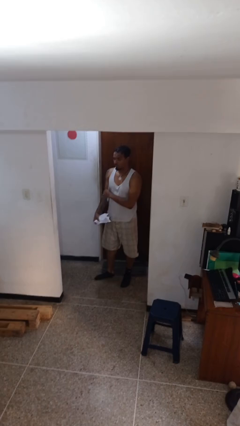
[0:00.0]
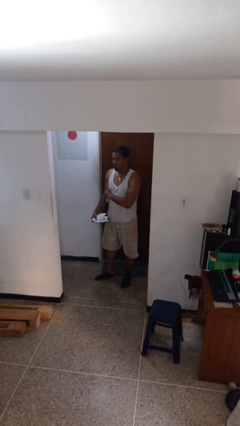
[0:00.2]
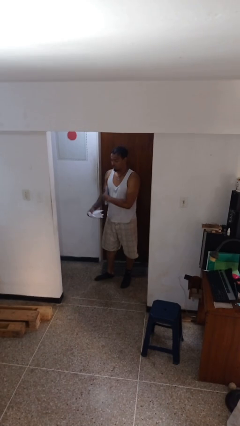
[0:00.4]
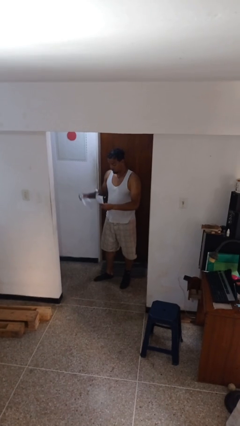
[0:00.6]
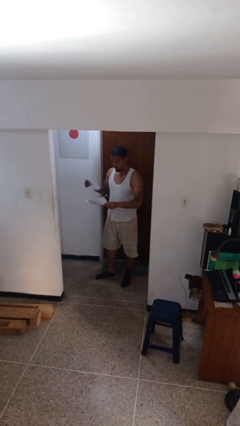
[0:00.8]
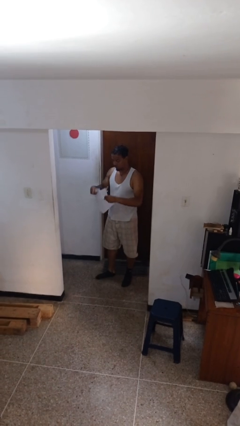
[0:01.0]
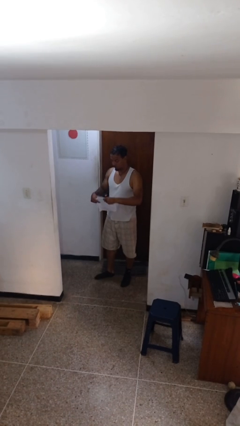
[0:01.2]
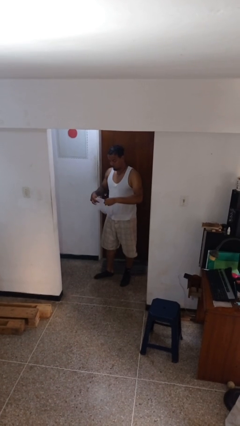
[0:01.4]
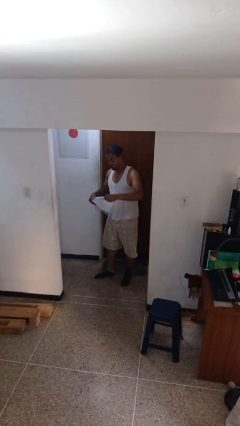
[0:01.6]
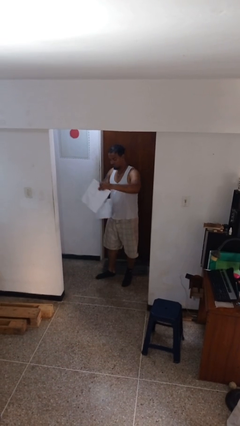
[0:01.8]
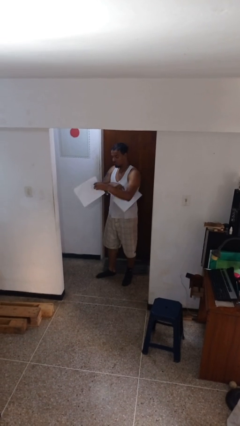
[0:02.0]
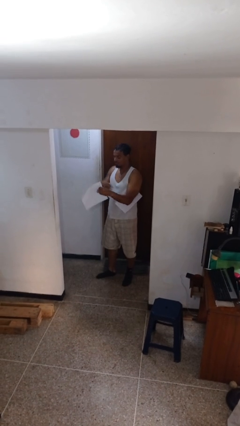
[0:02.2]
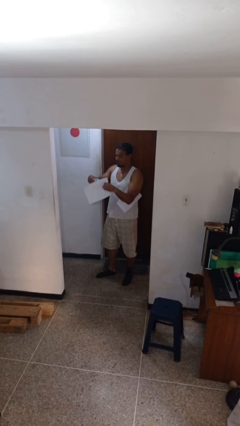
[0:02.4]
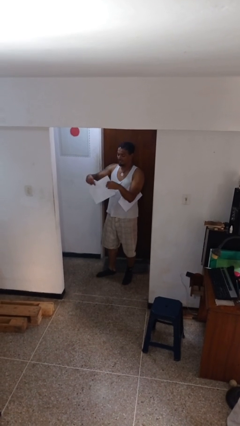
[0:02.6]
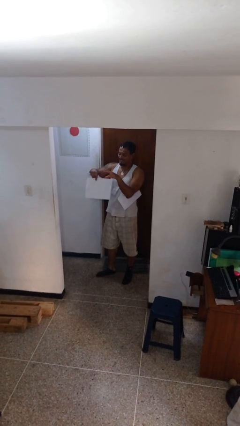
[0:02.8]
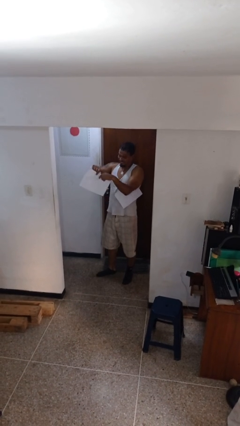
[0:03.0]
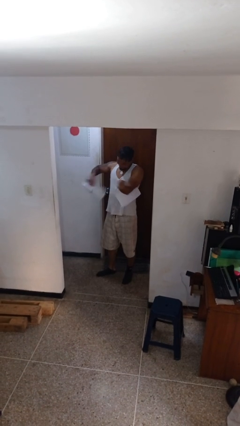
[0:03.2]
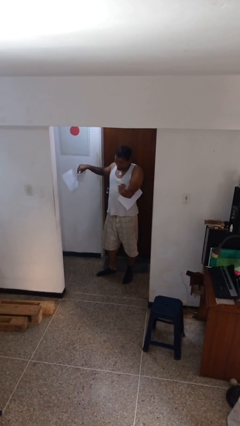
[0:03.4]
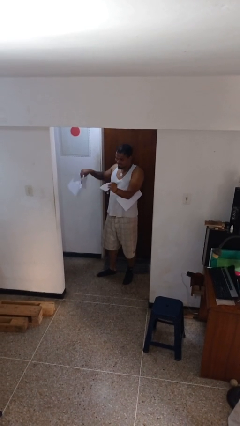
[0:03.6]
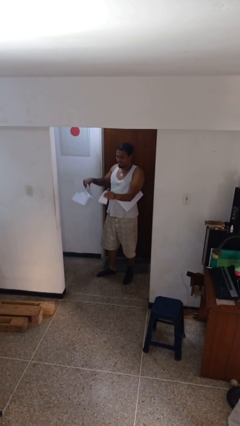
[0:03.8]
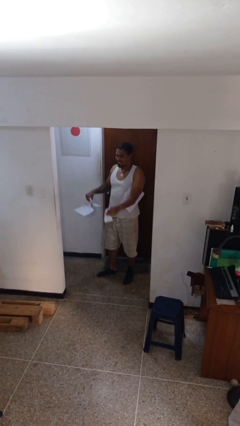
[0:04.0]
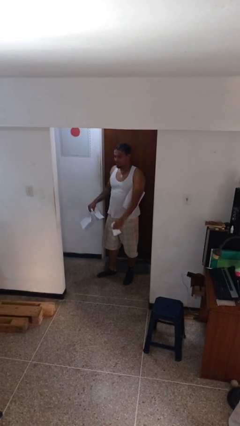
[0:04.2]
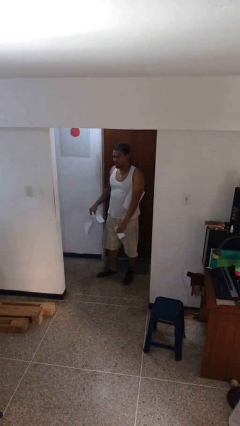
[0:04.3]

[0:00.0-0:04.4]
person tears paper

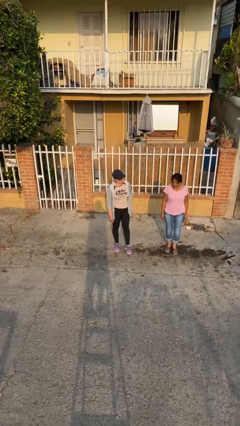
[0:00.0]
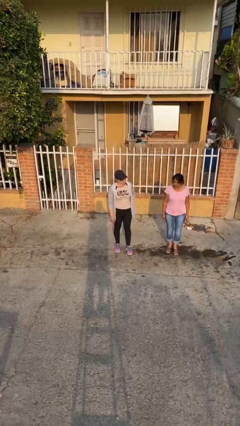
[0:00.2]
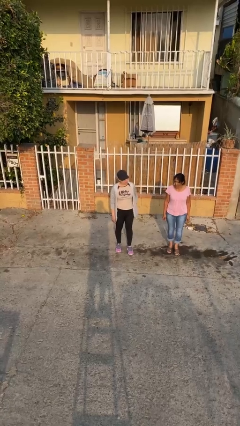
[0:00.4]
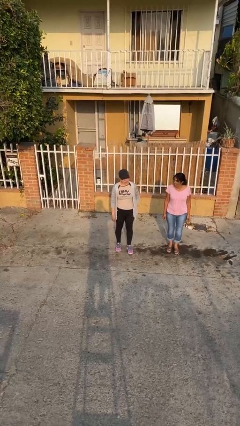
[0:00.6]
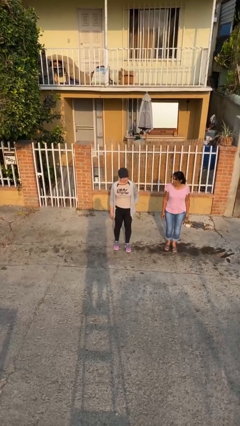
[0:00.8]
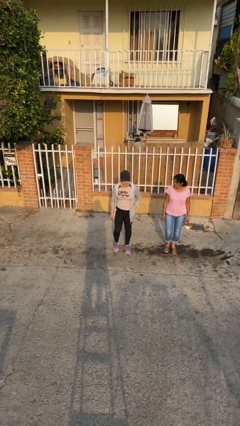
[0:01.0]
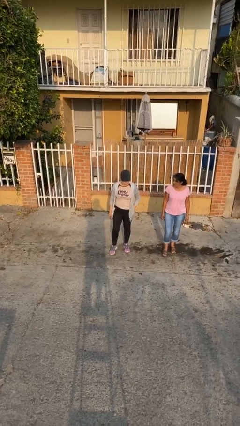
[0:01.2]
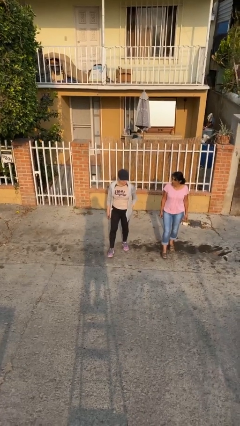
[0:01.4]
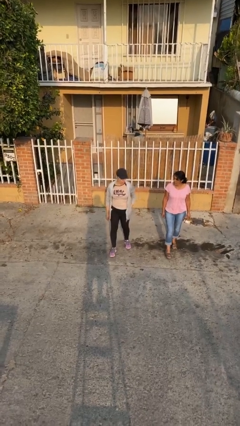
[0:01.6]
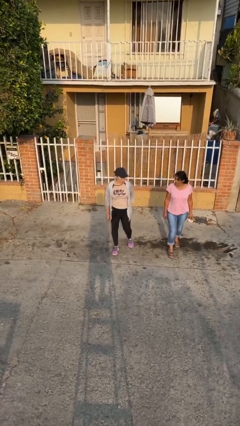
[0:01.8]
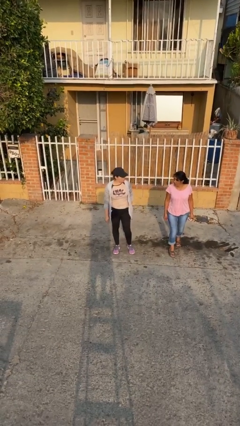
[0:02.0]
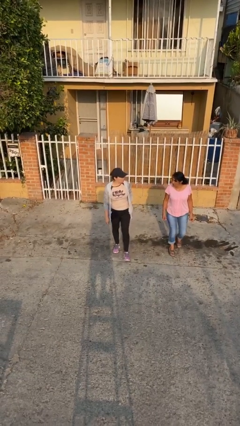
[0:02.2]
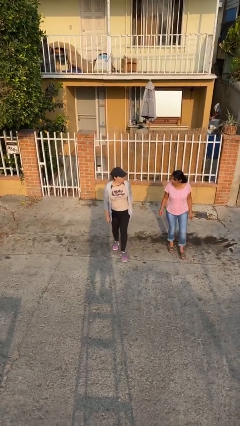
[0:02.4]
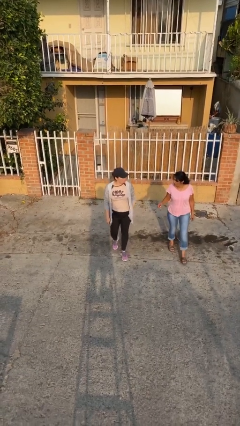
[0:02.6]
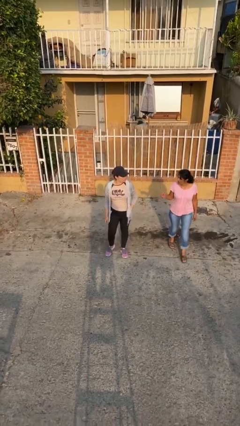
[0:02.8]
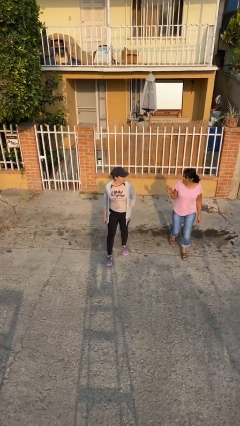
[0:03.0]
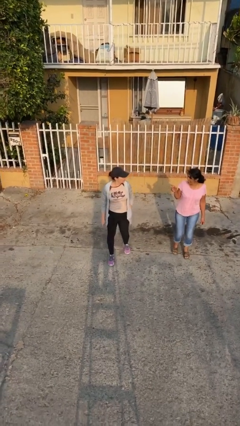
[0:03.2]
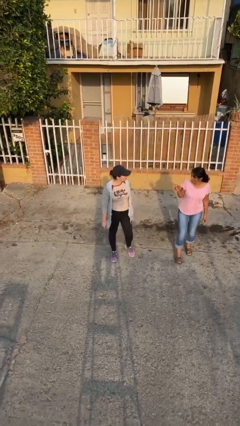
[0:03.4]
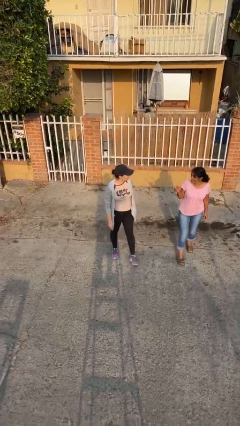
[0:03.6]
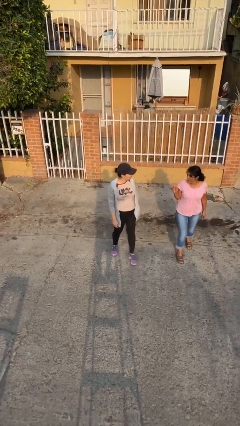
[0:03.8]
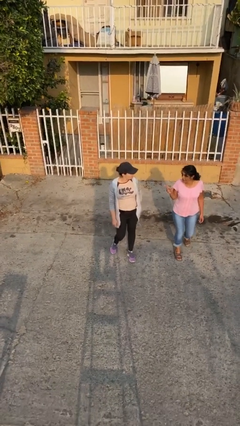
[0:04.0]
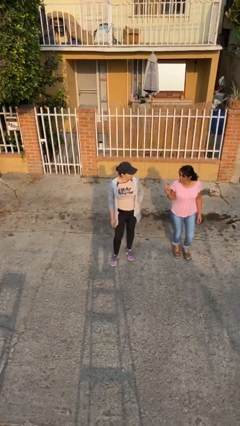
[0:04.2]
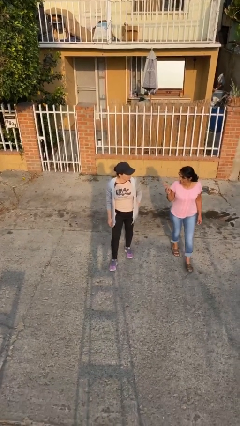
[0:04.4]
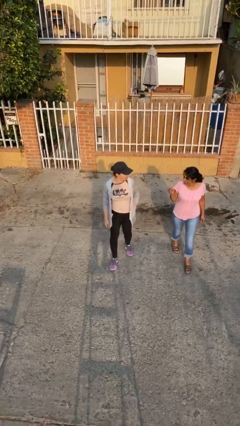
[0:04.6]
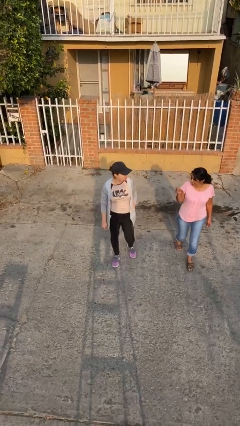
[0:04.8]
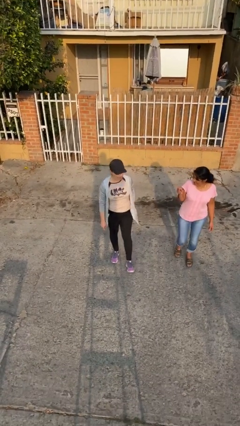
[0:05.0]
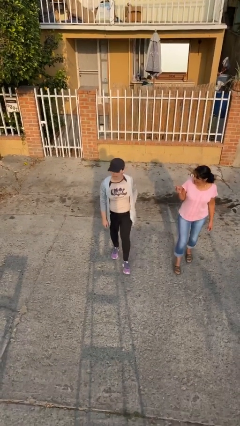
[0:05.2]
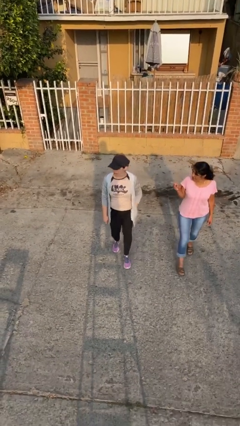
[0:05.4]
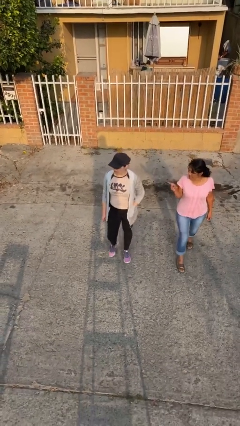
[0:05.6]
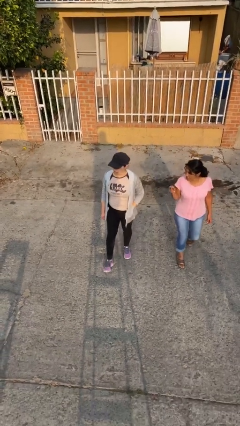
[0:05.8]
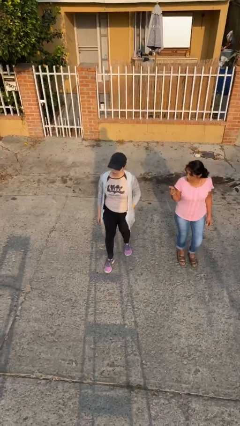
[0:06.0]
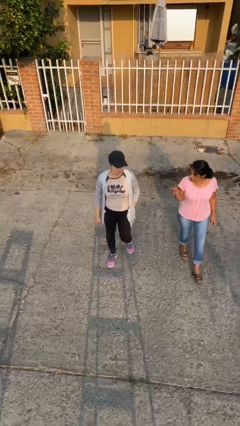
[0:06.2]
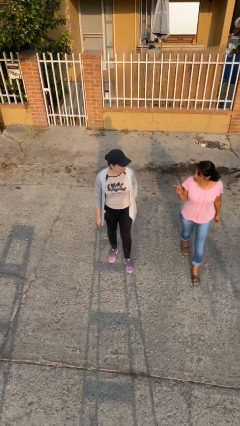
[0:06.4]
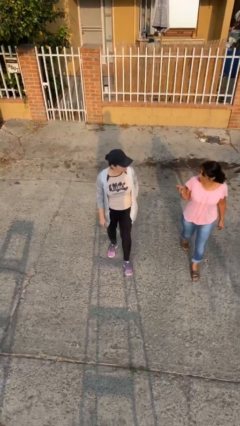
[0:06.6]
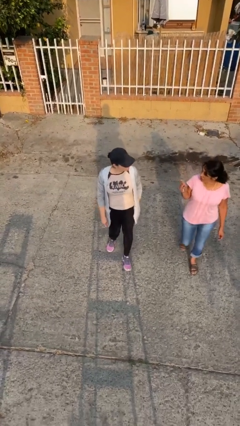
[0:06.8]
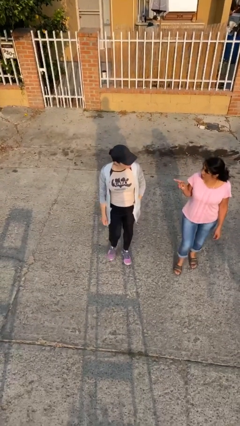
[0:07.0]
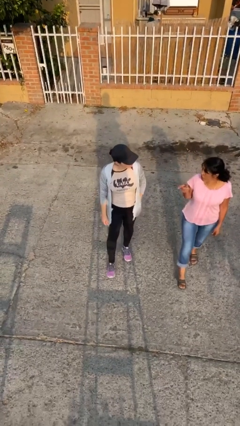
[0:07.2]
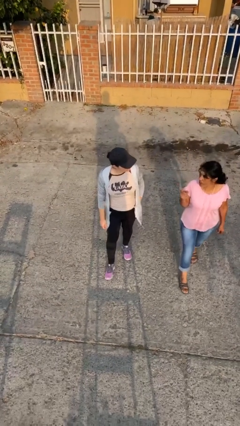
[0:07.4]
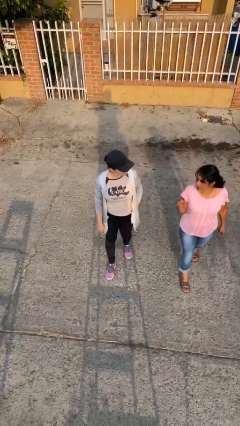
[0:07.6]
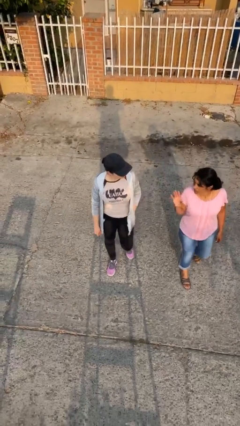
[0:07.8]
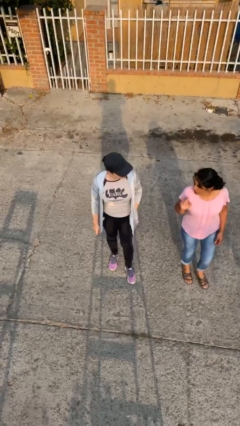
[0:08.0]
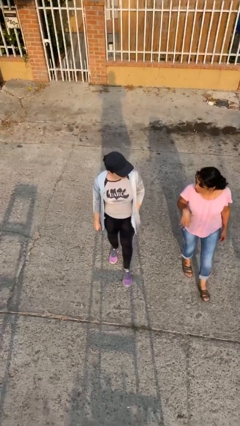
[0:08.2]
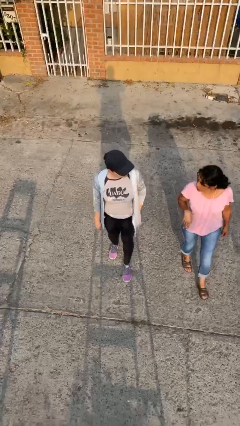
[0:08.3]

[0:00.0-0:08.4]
person talks to person

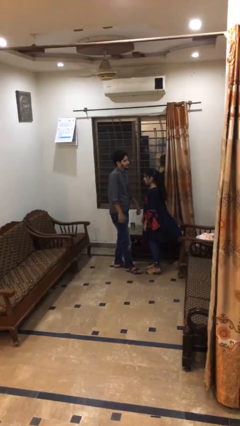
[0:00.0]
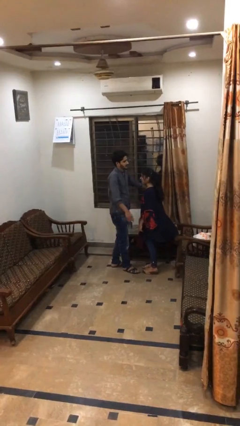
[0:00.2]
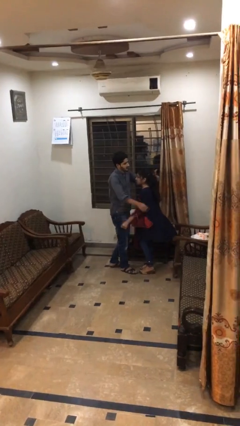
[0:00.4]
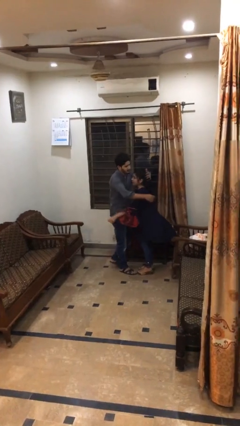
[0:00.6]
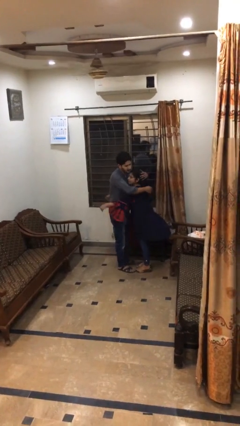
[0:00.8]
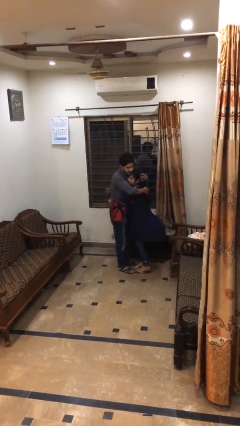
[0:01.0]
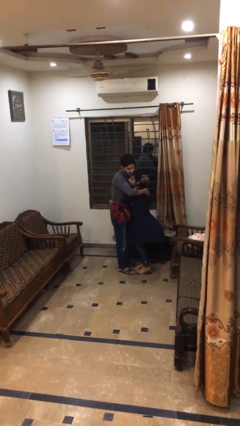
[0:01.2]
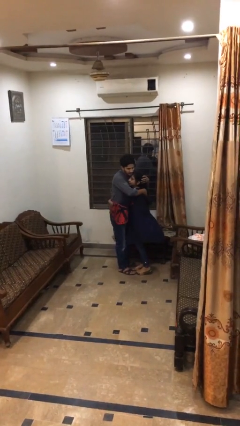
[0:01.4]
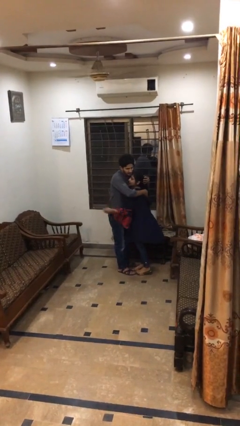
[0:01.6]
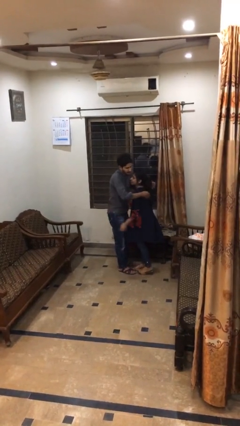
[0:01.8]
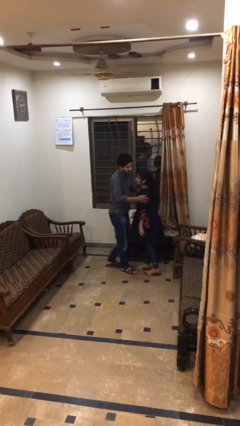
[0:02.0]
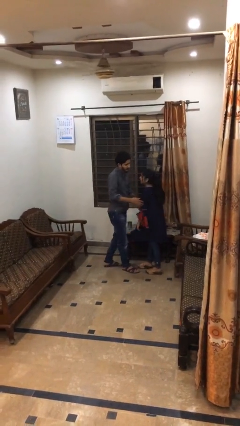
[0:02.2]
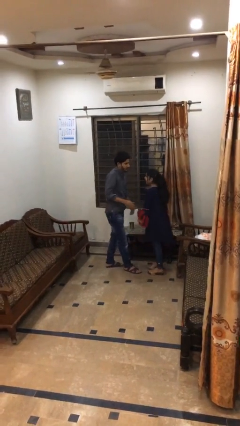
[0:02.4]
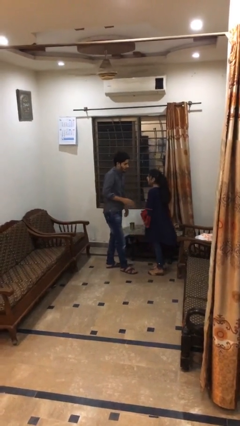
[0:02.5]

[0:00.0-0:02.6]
person embraces person

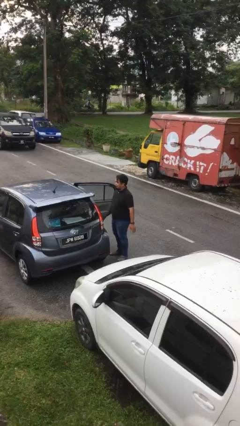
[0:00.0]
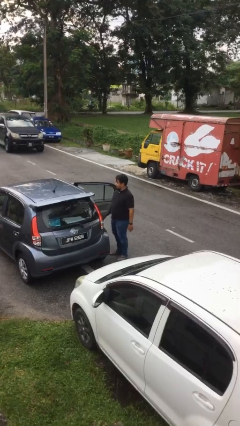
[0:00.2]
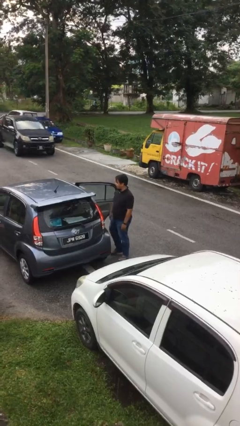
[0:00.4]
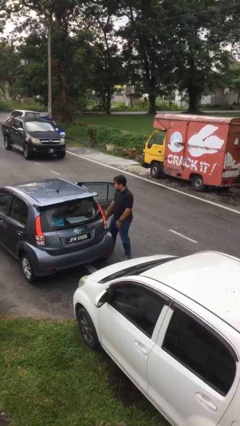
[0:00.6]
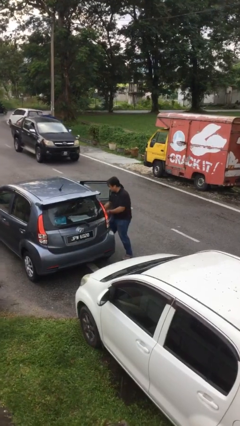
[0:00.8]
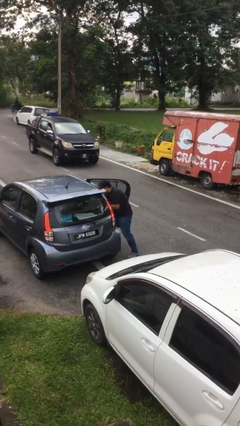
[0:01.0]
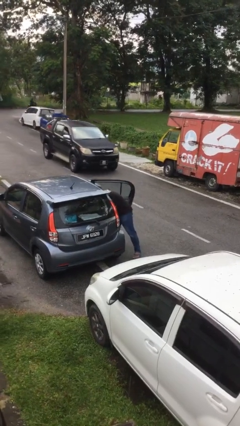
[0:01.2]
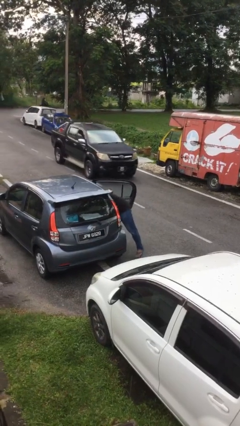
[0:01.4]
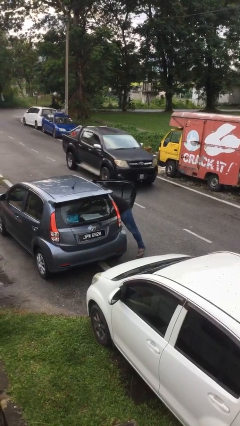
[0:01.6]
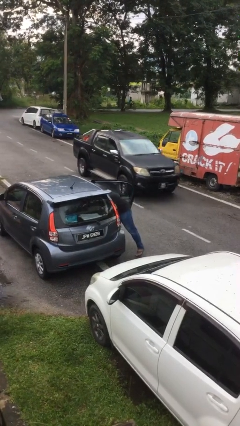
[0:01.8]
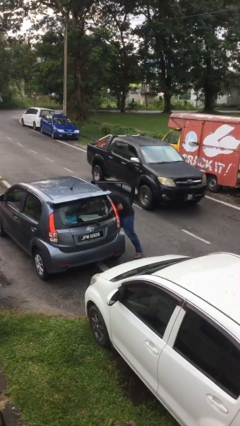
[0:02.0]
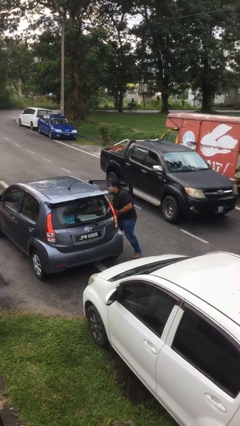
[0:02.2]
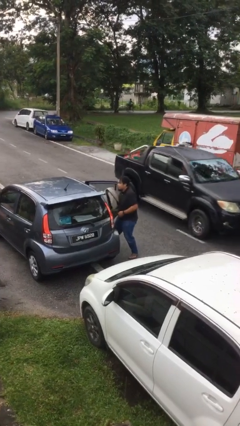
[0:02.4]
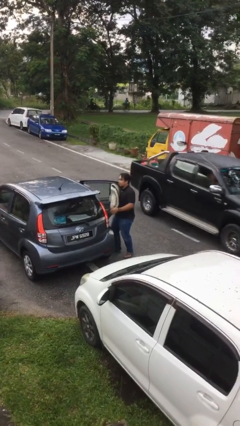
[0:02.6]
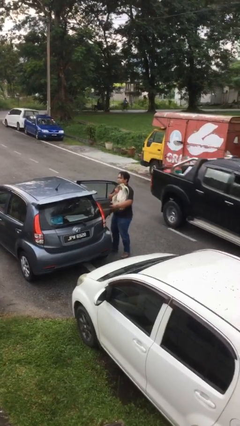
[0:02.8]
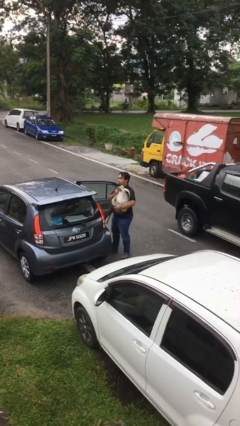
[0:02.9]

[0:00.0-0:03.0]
person unloads car
